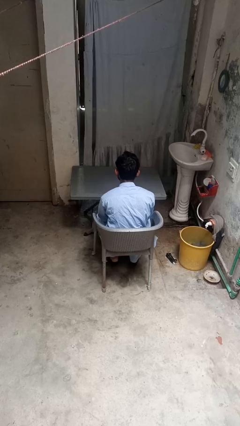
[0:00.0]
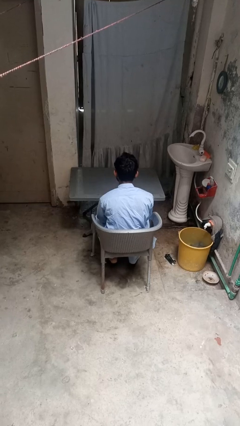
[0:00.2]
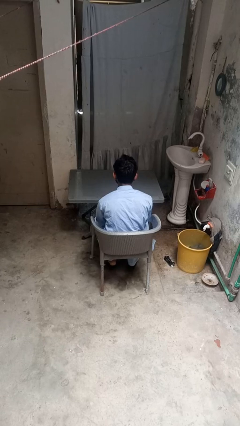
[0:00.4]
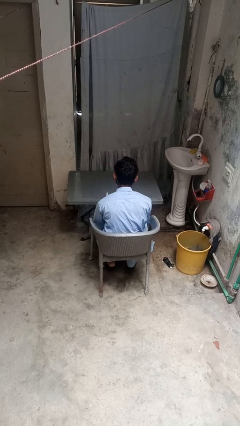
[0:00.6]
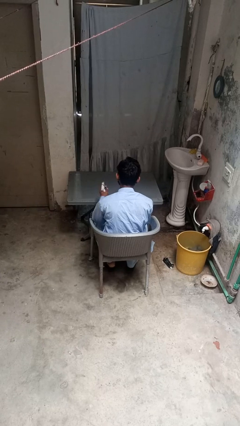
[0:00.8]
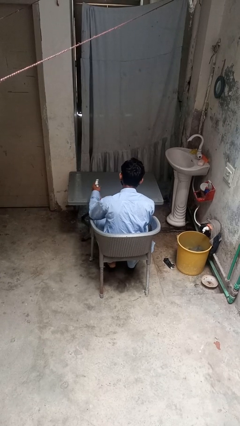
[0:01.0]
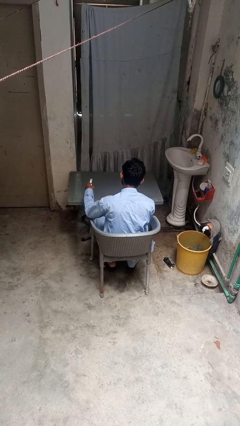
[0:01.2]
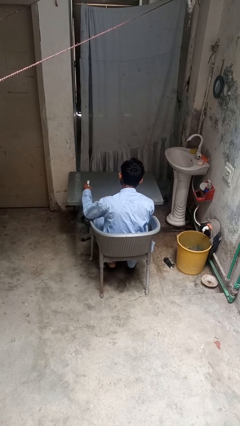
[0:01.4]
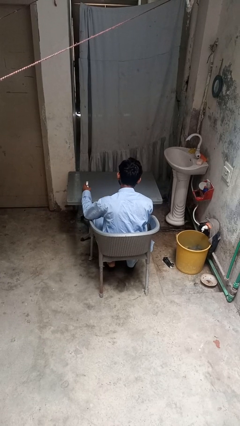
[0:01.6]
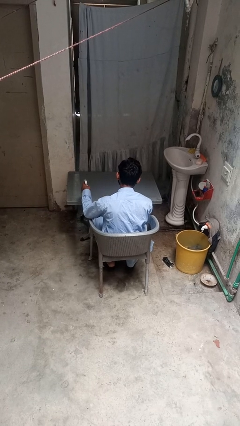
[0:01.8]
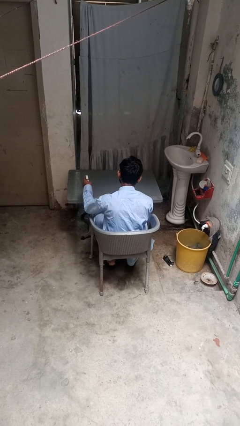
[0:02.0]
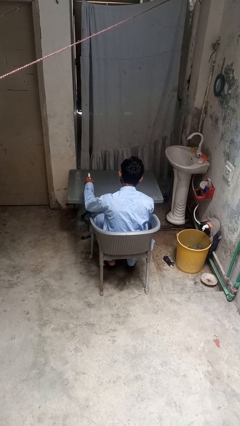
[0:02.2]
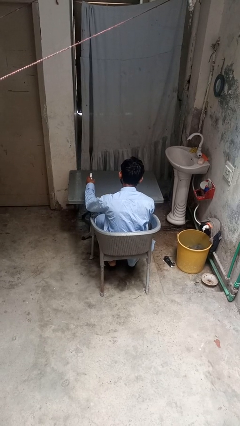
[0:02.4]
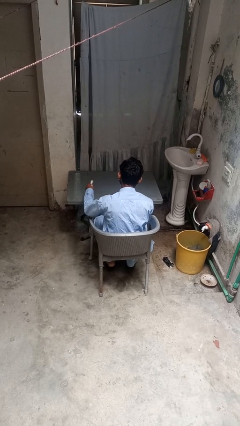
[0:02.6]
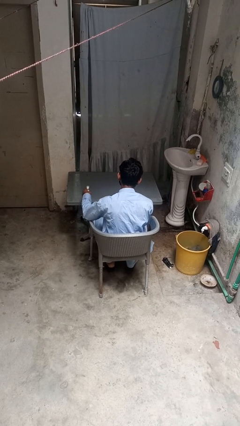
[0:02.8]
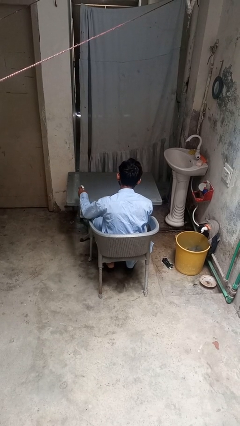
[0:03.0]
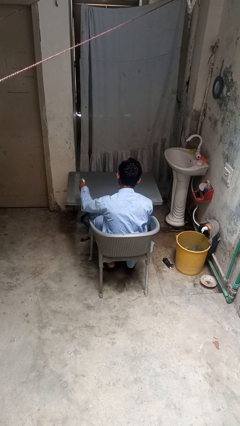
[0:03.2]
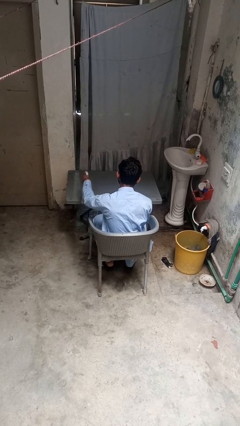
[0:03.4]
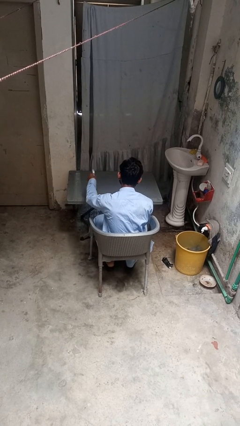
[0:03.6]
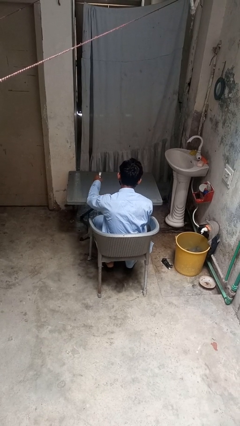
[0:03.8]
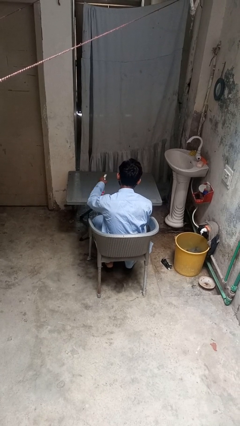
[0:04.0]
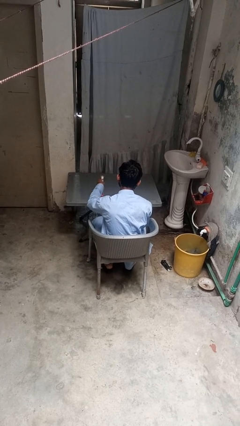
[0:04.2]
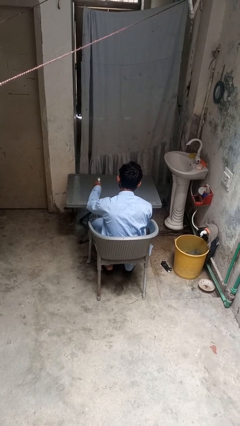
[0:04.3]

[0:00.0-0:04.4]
person sprays from bottle

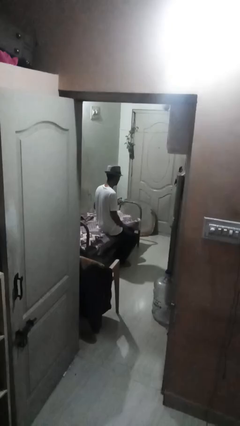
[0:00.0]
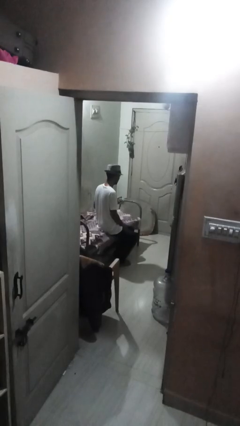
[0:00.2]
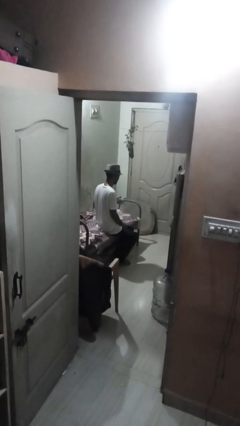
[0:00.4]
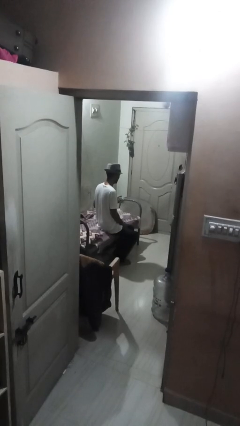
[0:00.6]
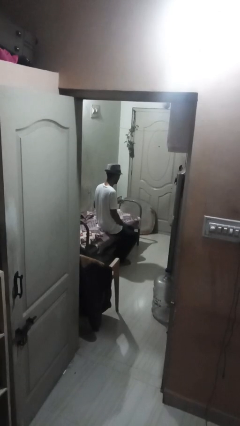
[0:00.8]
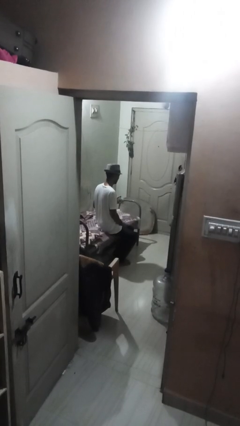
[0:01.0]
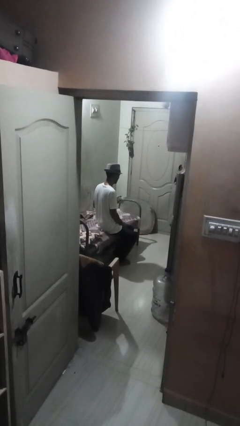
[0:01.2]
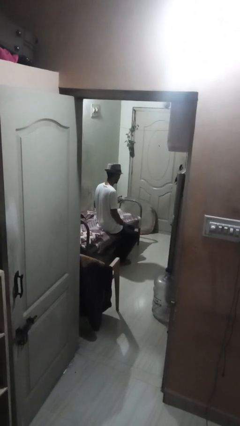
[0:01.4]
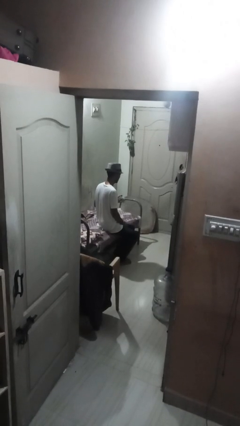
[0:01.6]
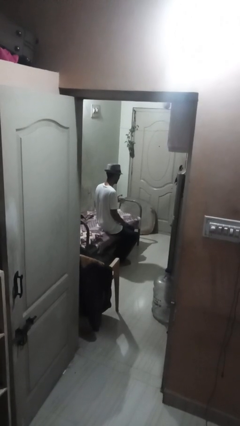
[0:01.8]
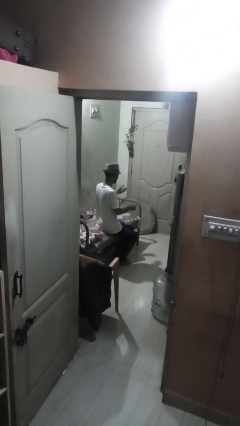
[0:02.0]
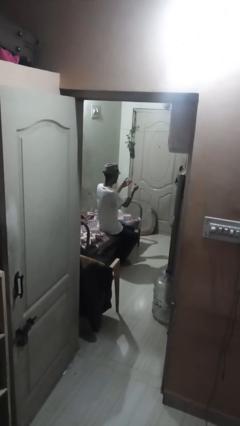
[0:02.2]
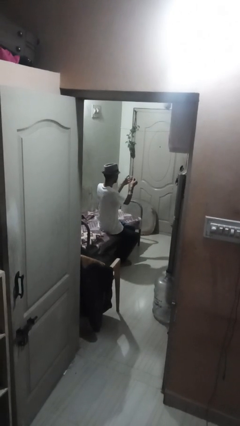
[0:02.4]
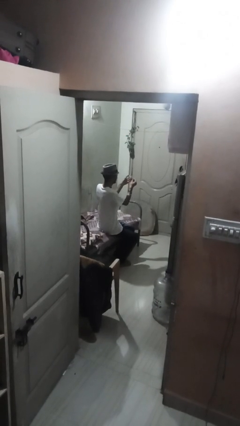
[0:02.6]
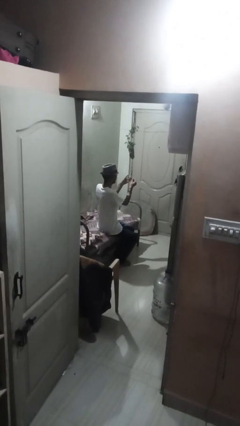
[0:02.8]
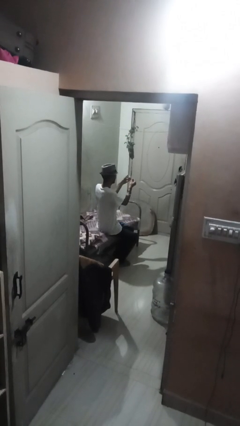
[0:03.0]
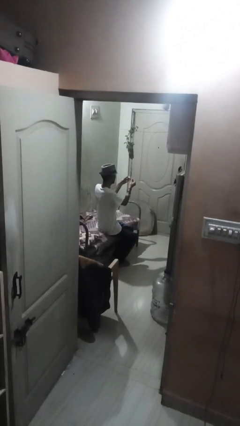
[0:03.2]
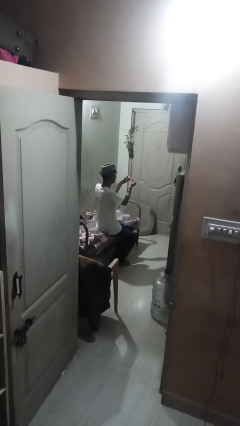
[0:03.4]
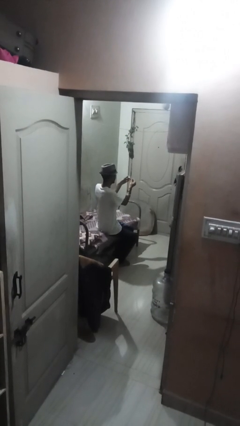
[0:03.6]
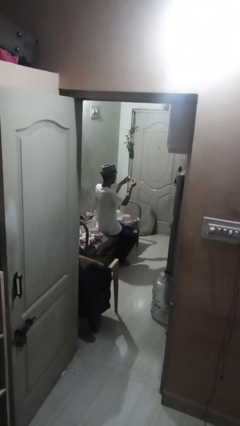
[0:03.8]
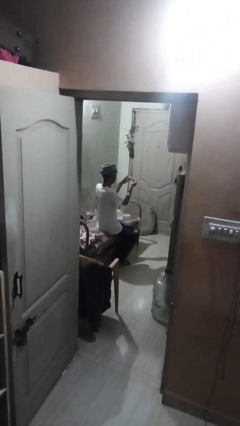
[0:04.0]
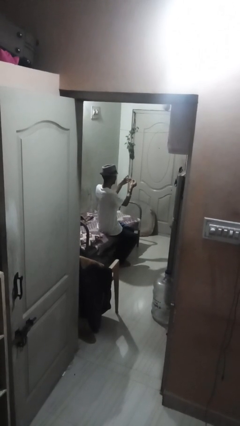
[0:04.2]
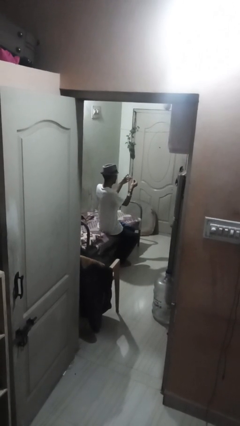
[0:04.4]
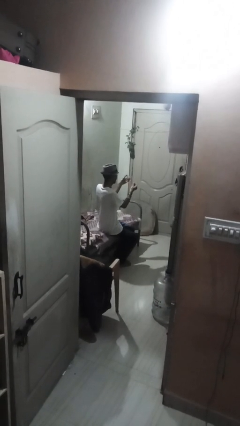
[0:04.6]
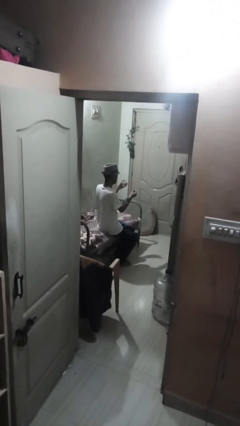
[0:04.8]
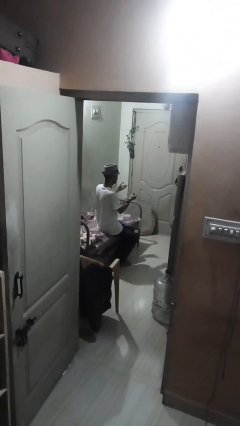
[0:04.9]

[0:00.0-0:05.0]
person clips fingernails

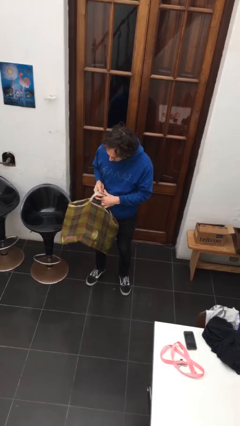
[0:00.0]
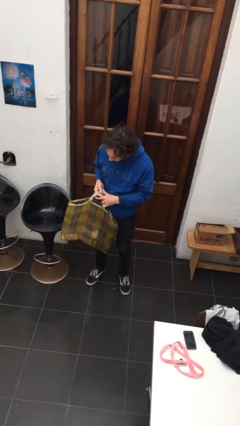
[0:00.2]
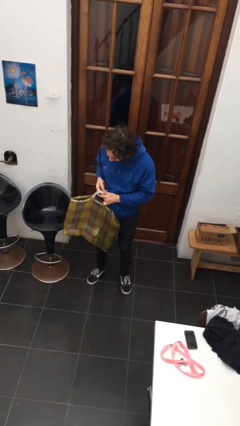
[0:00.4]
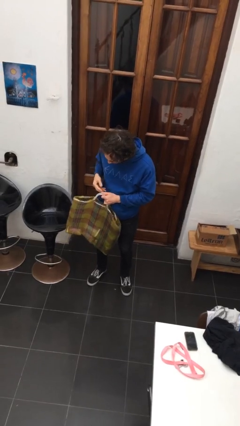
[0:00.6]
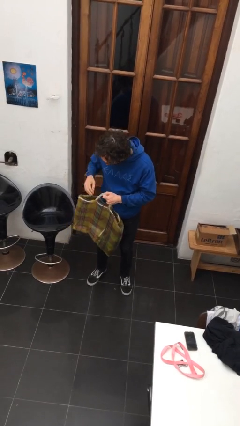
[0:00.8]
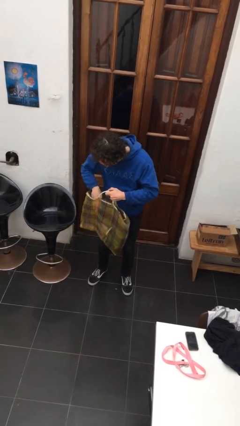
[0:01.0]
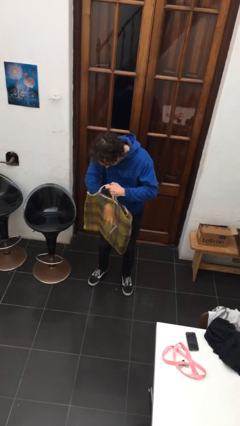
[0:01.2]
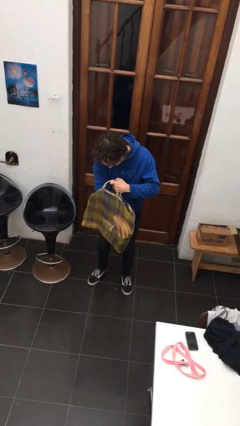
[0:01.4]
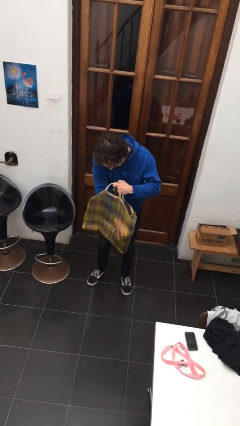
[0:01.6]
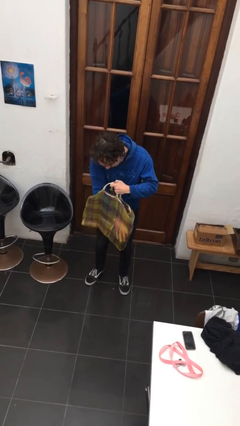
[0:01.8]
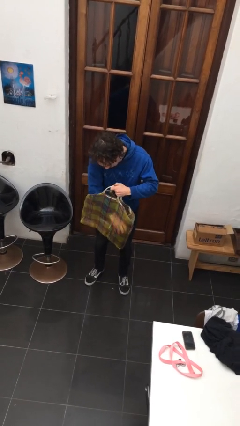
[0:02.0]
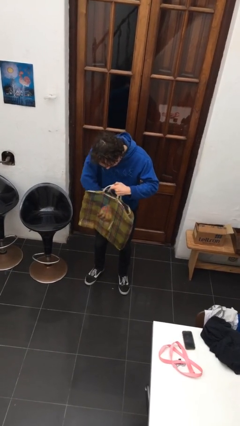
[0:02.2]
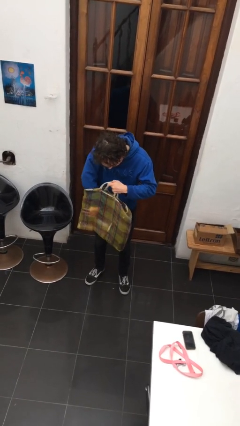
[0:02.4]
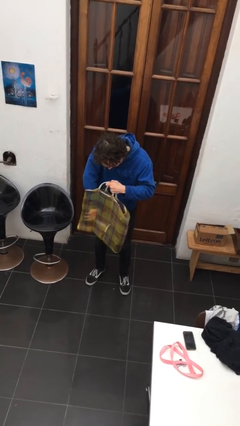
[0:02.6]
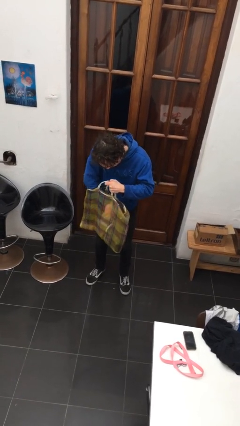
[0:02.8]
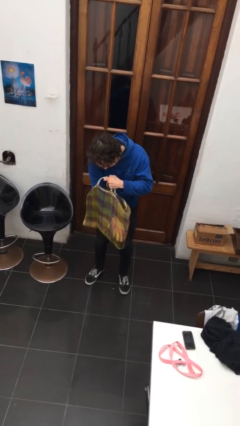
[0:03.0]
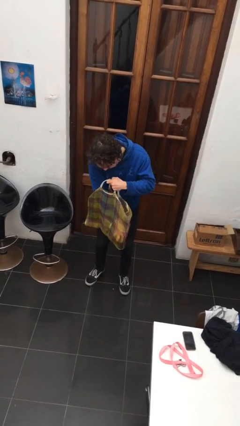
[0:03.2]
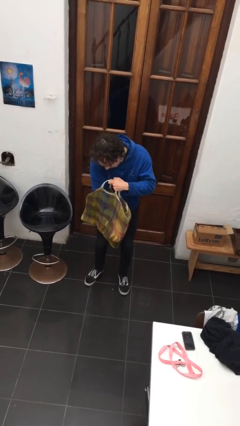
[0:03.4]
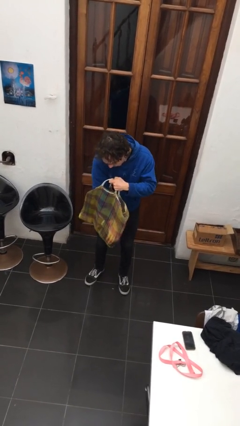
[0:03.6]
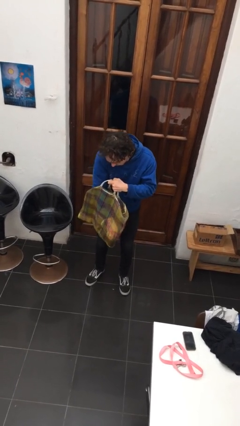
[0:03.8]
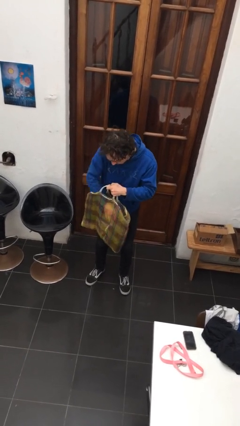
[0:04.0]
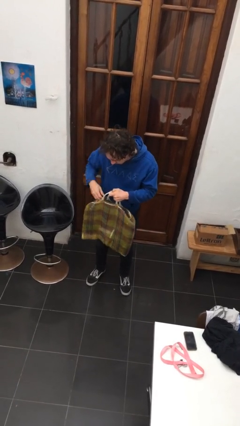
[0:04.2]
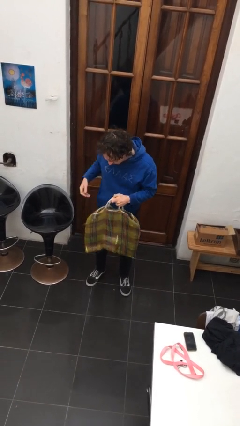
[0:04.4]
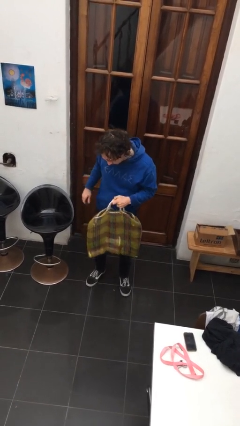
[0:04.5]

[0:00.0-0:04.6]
person searches in bag

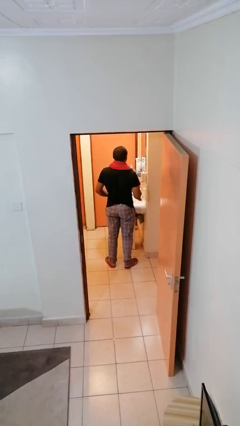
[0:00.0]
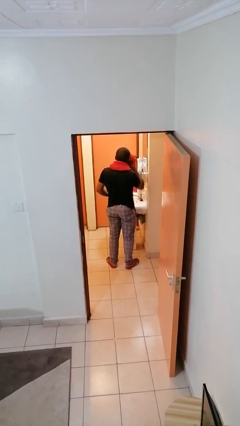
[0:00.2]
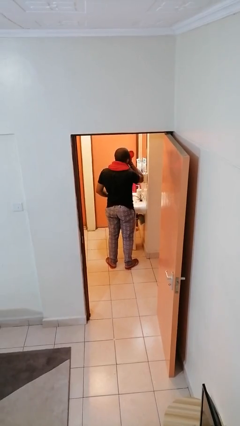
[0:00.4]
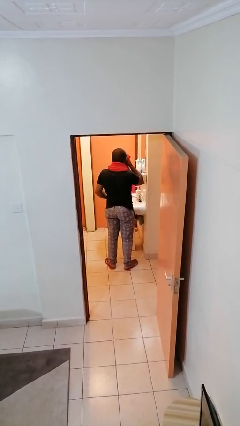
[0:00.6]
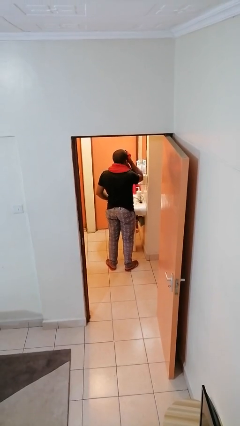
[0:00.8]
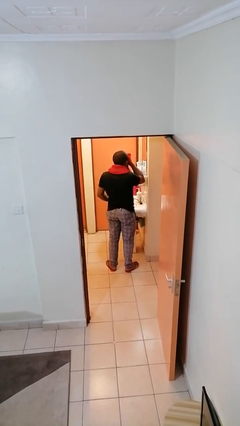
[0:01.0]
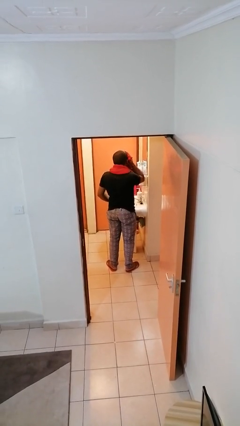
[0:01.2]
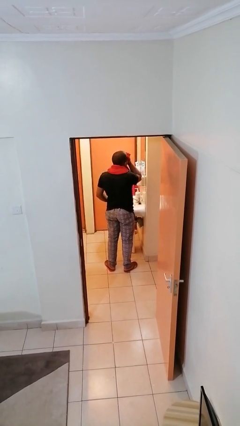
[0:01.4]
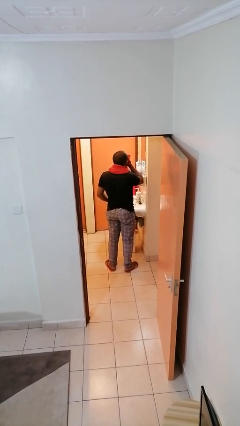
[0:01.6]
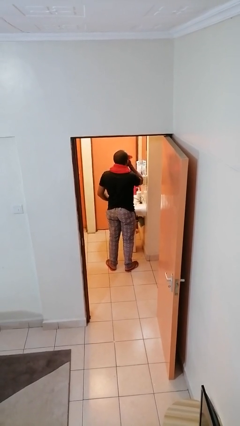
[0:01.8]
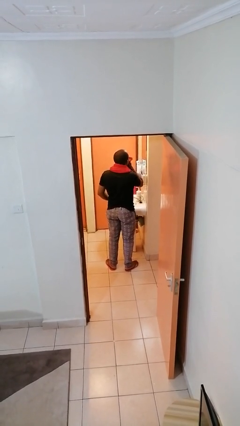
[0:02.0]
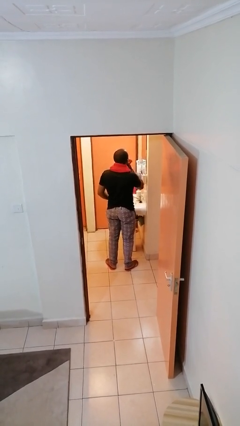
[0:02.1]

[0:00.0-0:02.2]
person dries face with towel

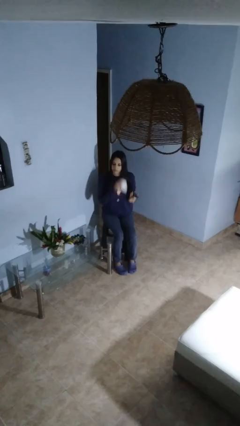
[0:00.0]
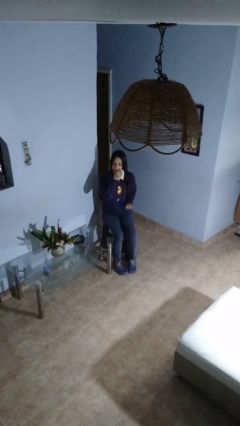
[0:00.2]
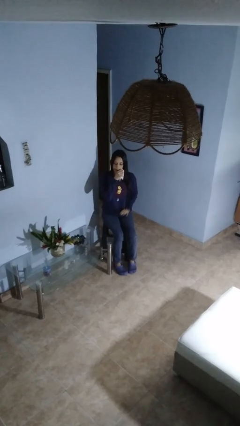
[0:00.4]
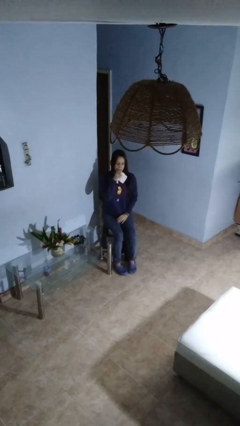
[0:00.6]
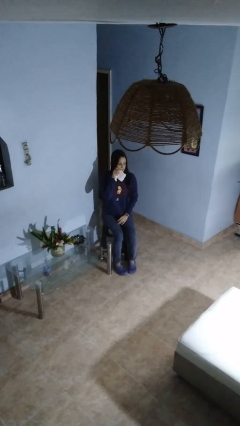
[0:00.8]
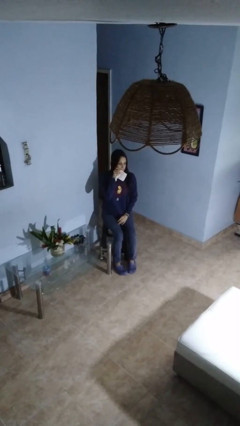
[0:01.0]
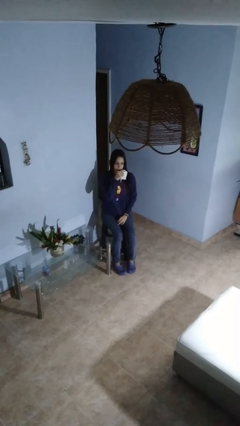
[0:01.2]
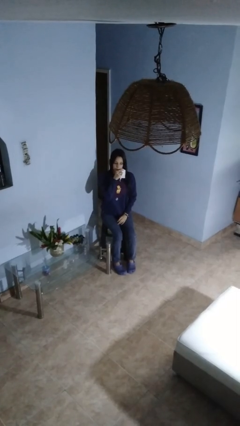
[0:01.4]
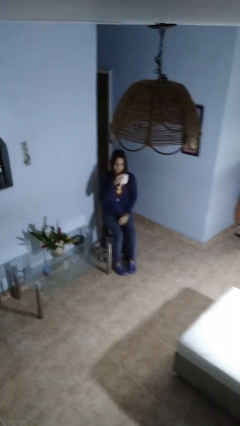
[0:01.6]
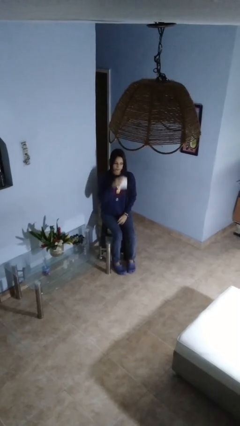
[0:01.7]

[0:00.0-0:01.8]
person wipes mouth with napkin
